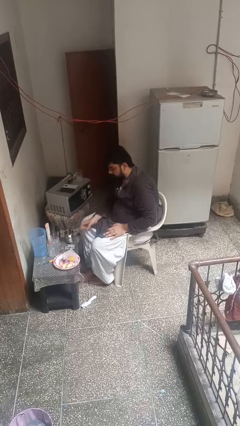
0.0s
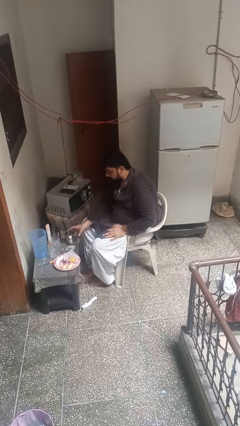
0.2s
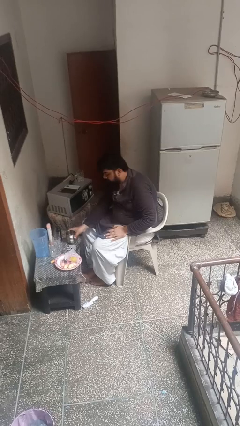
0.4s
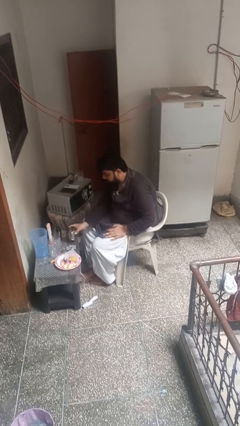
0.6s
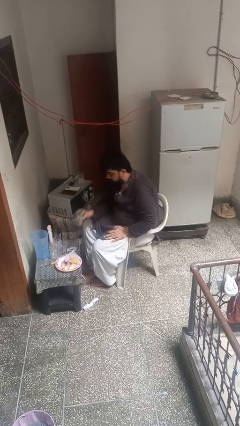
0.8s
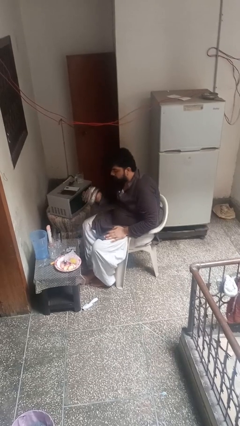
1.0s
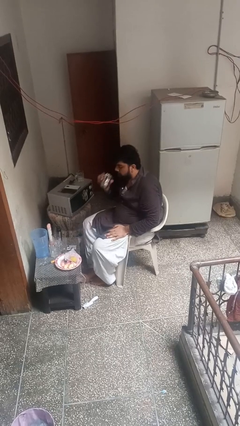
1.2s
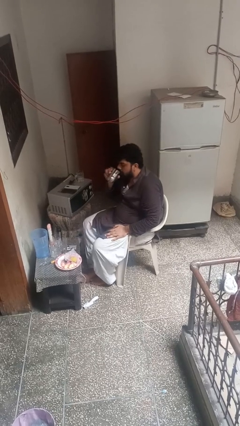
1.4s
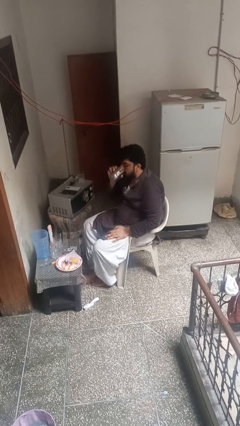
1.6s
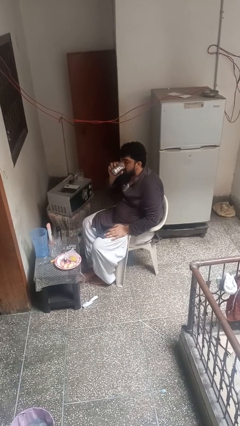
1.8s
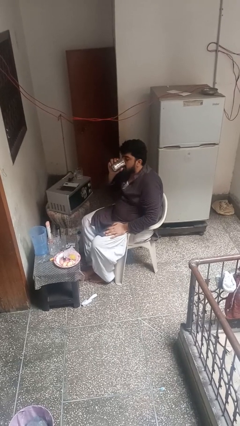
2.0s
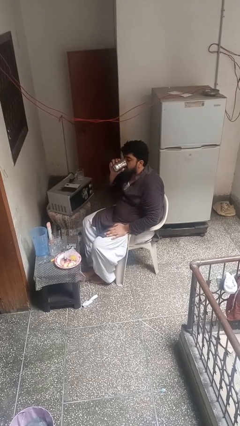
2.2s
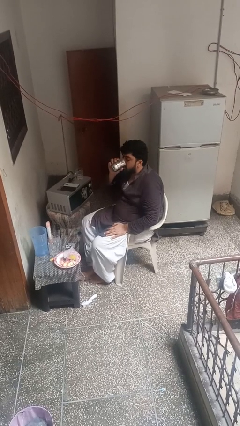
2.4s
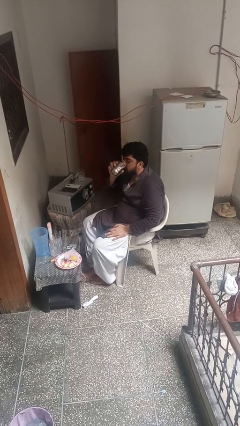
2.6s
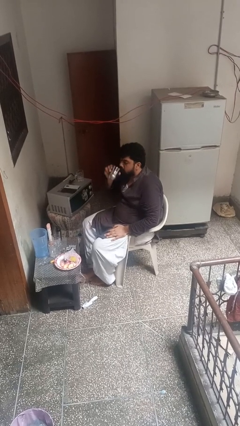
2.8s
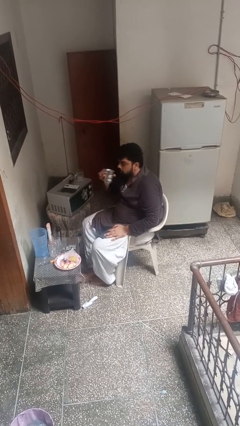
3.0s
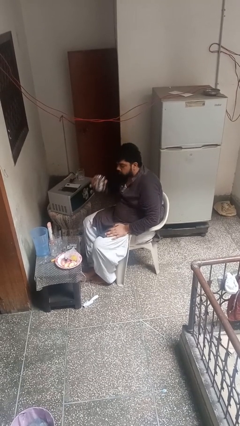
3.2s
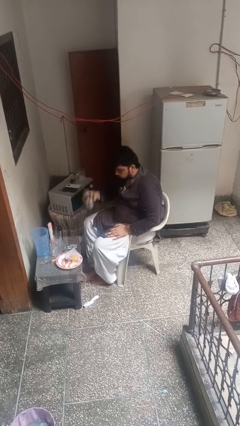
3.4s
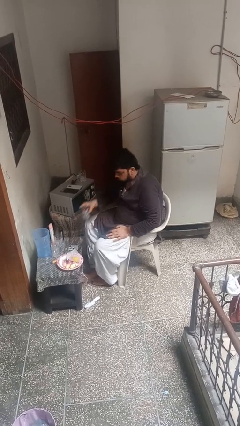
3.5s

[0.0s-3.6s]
person drinks from cup

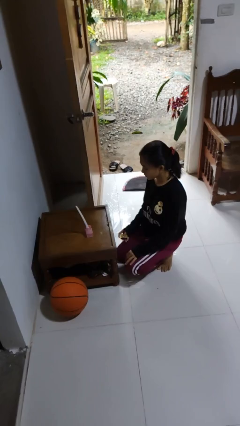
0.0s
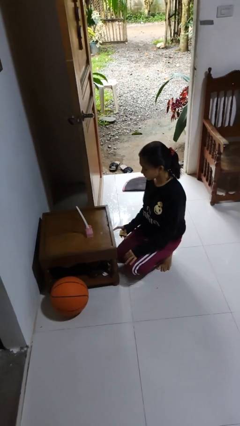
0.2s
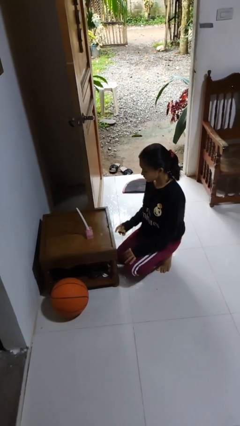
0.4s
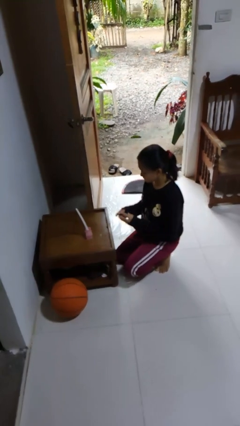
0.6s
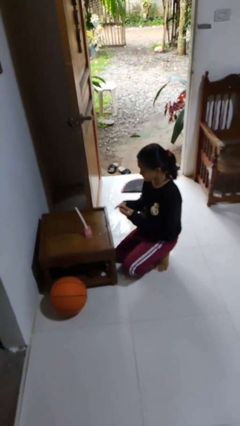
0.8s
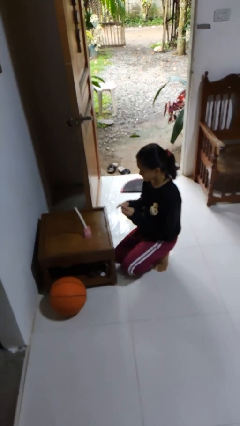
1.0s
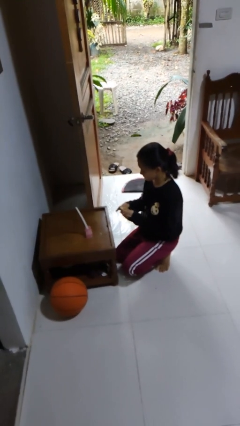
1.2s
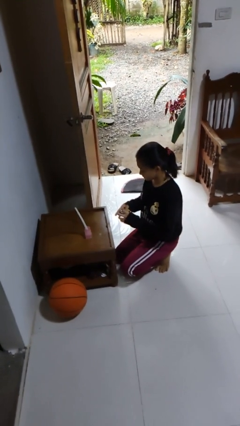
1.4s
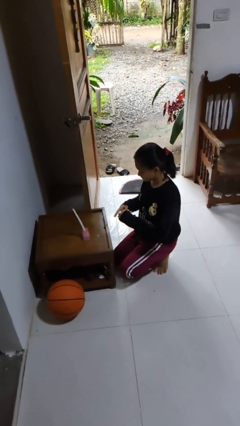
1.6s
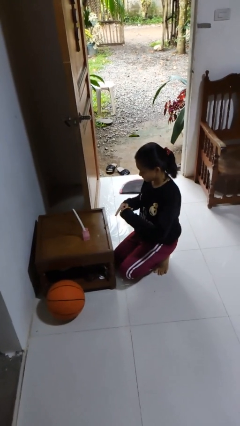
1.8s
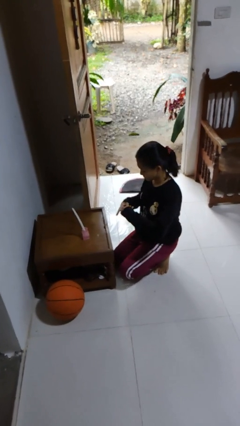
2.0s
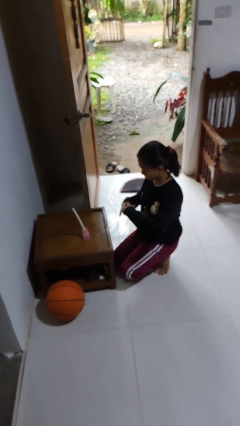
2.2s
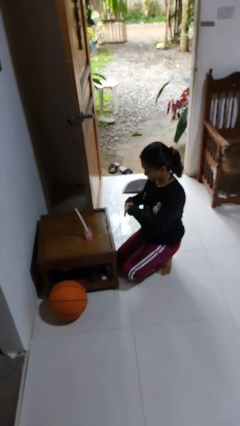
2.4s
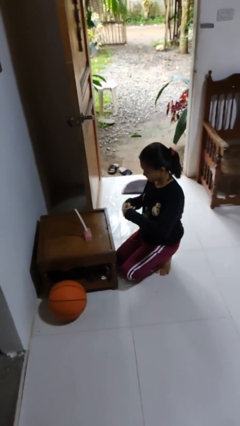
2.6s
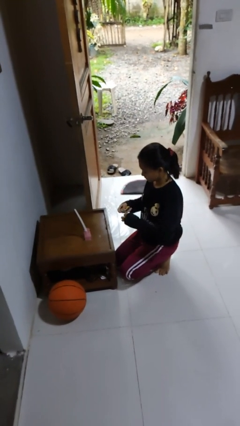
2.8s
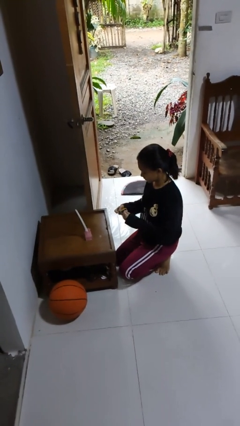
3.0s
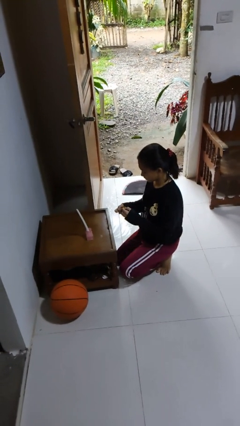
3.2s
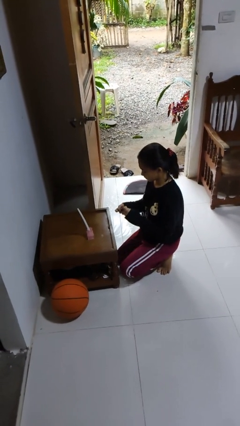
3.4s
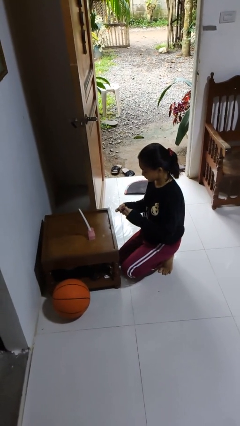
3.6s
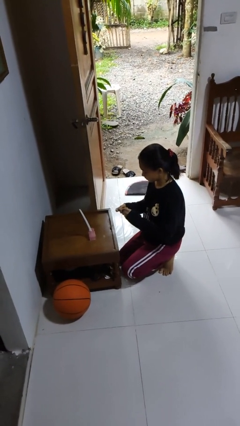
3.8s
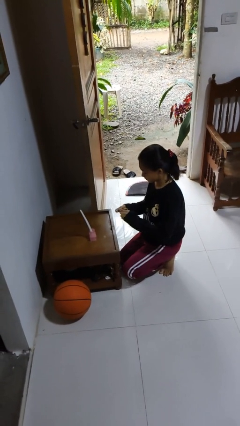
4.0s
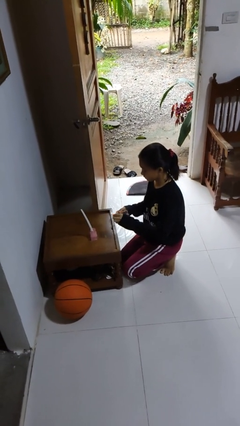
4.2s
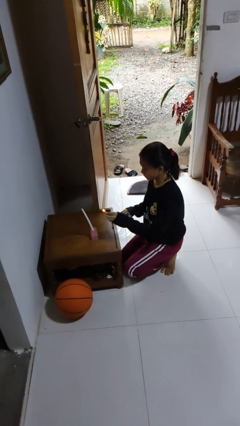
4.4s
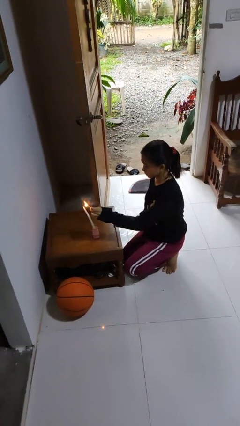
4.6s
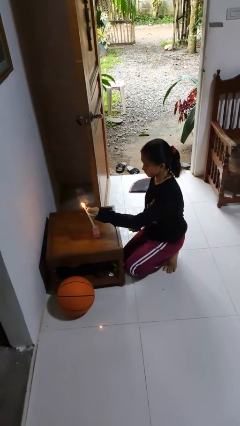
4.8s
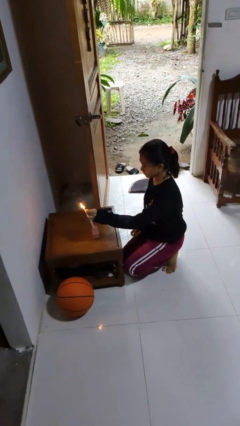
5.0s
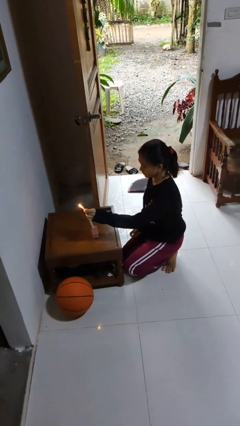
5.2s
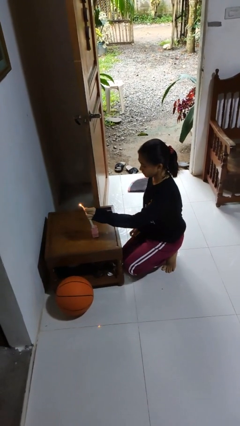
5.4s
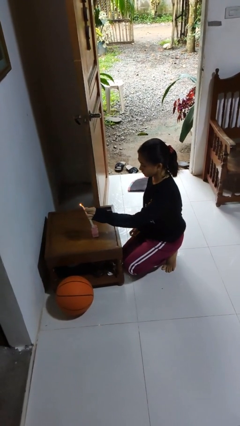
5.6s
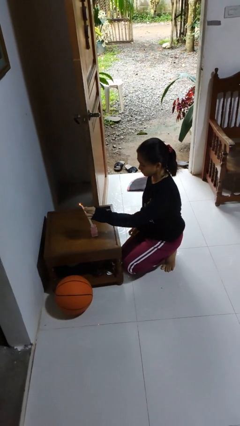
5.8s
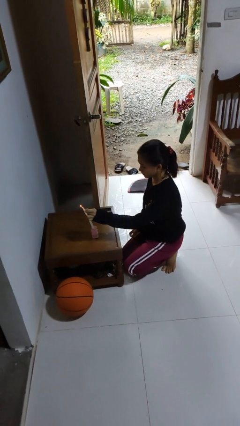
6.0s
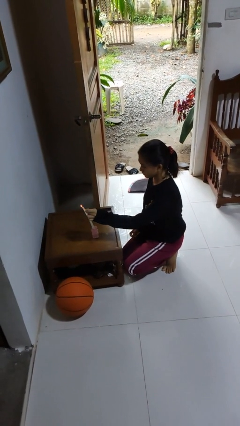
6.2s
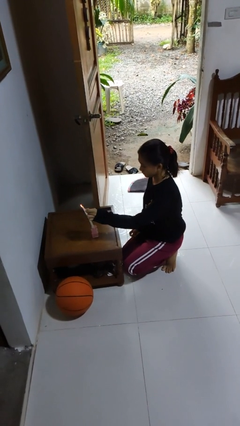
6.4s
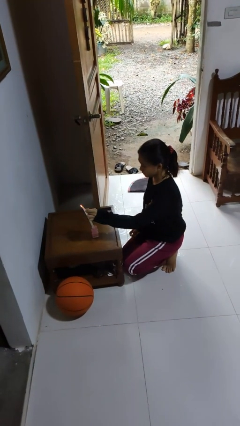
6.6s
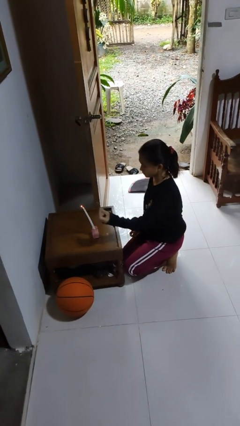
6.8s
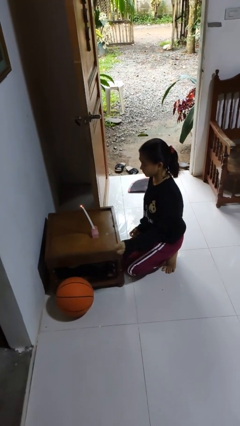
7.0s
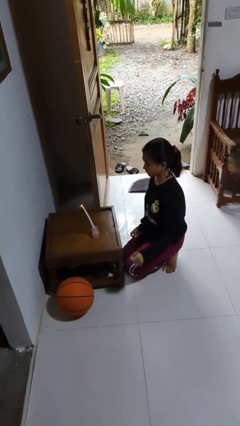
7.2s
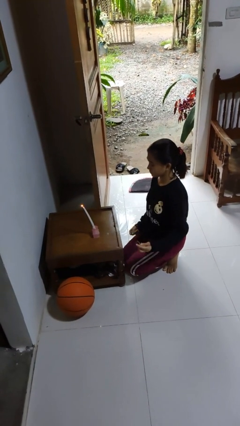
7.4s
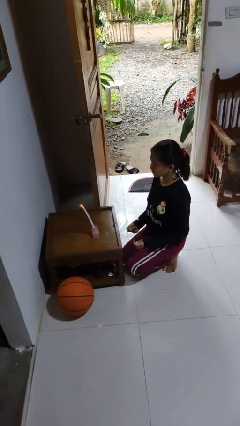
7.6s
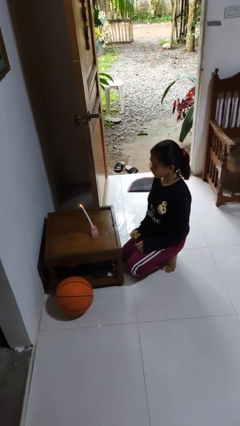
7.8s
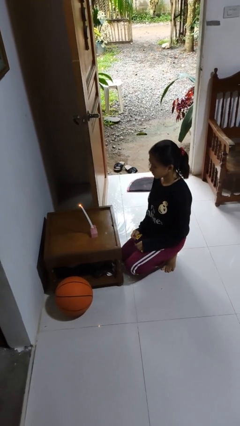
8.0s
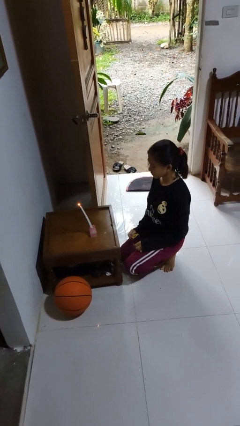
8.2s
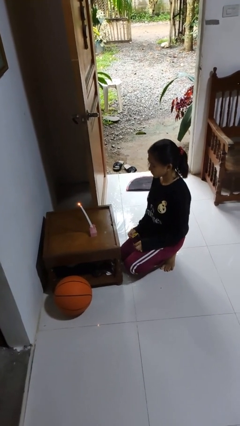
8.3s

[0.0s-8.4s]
person lights candle

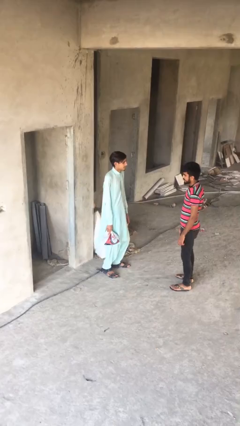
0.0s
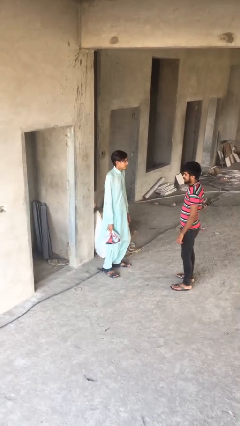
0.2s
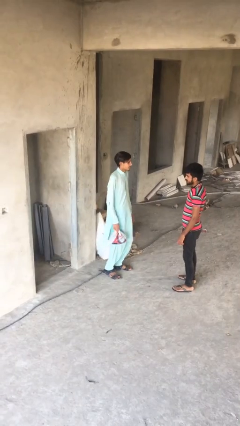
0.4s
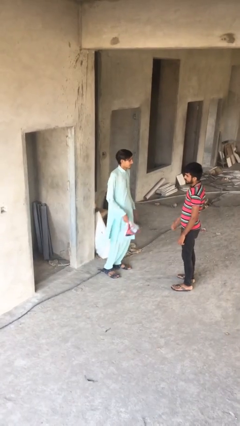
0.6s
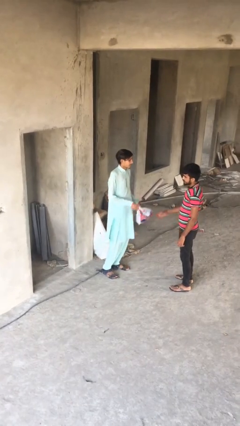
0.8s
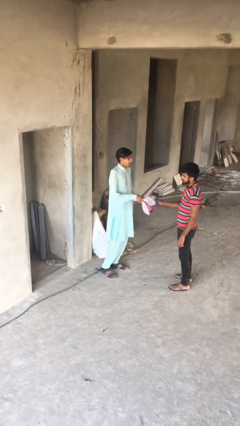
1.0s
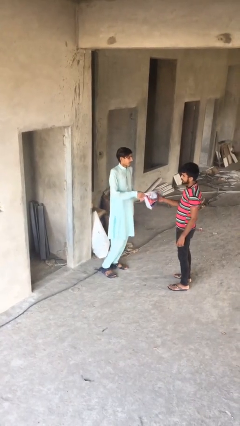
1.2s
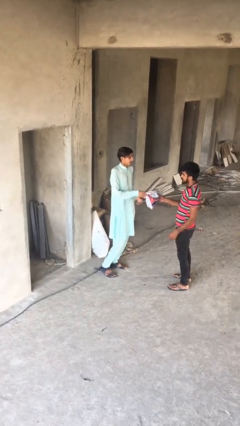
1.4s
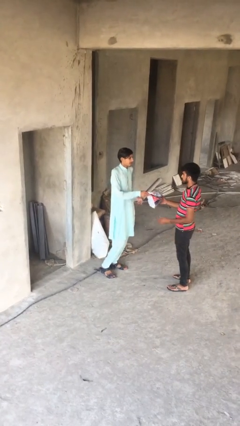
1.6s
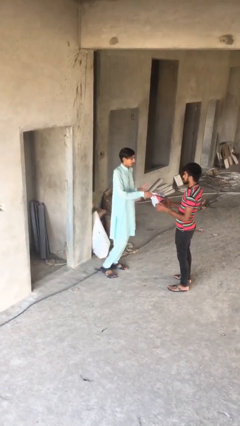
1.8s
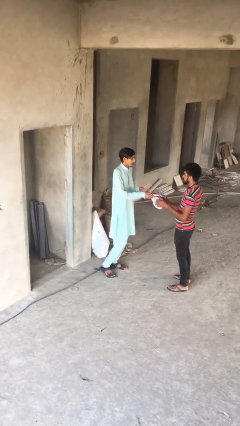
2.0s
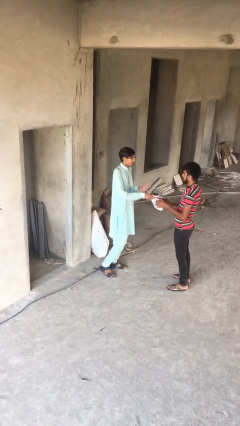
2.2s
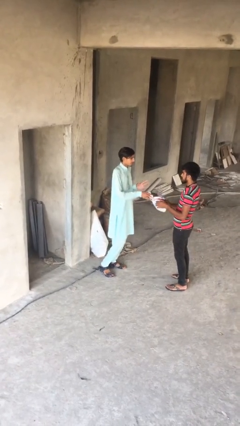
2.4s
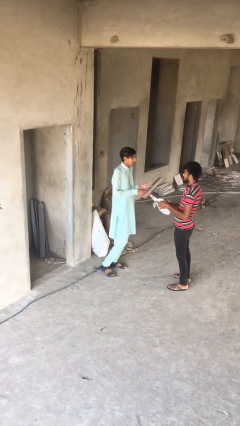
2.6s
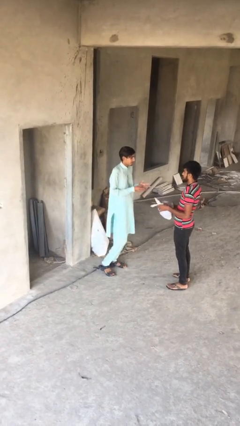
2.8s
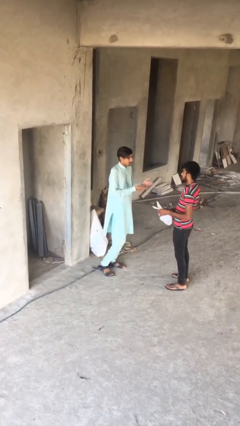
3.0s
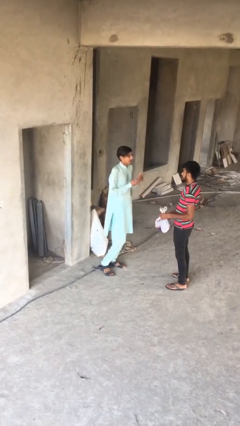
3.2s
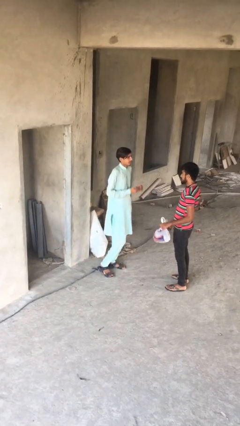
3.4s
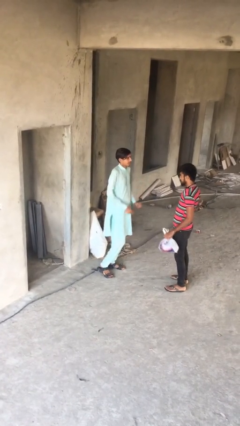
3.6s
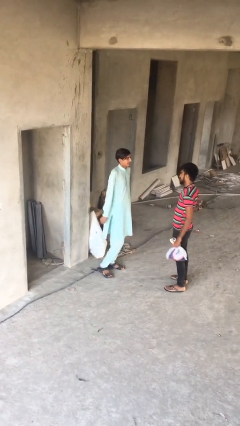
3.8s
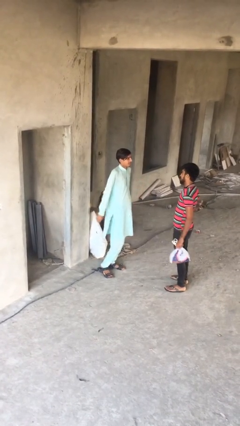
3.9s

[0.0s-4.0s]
person transfers object to person

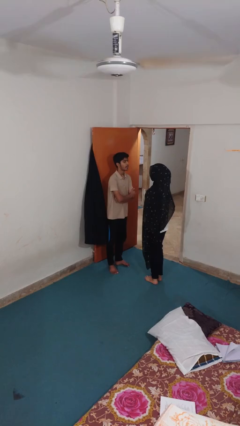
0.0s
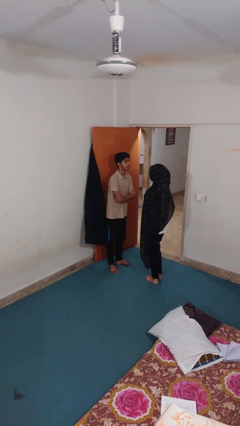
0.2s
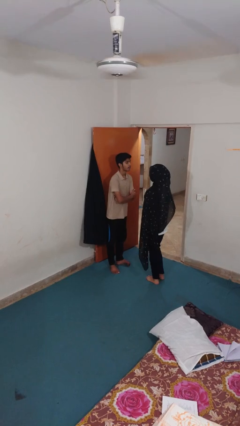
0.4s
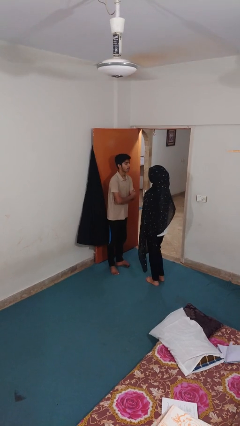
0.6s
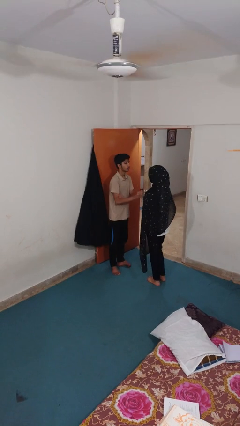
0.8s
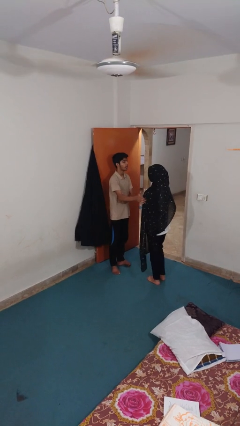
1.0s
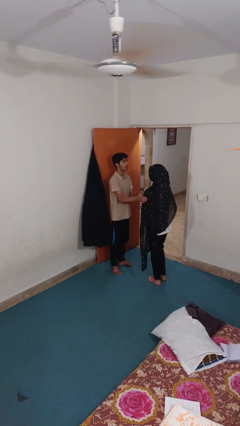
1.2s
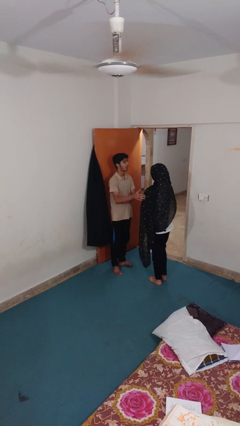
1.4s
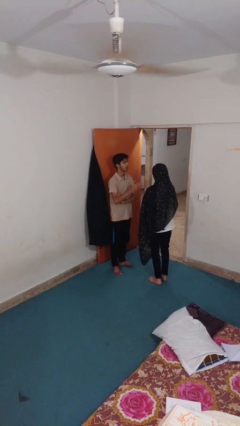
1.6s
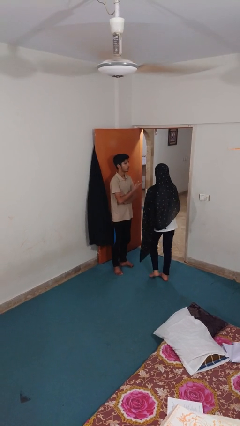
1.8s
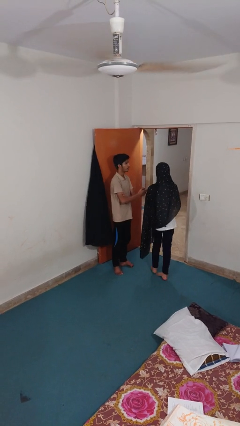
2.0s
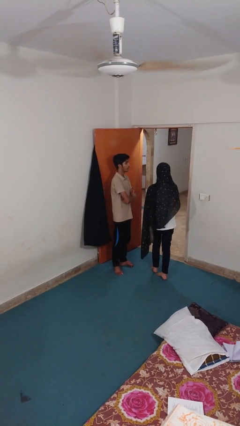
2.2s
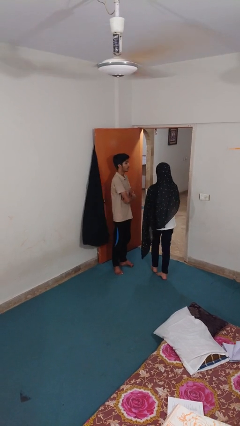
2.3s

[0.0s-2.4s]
person shoves person
